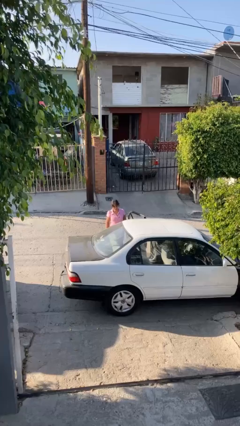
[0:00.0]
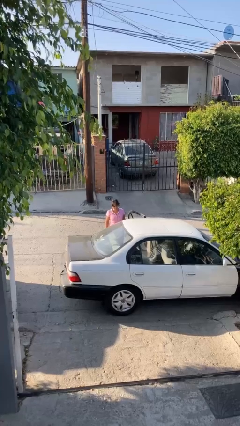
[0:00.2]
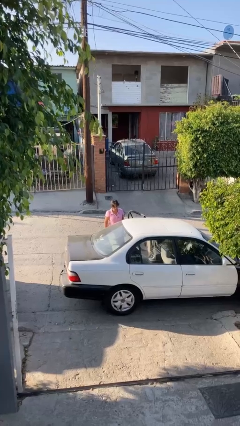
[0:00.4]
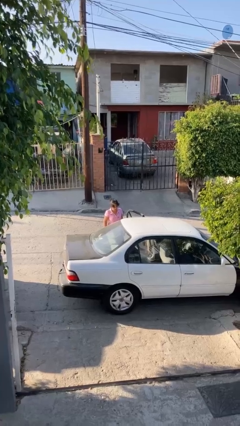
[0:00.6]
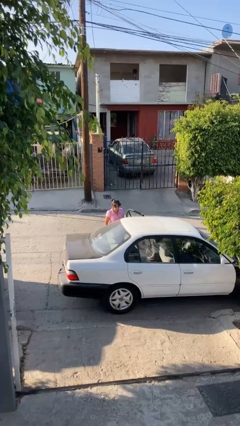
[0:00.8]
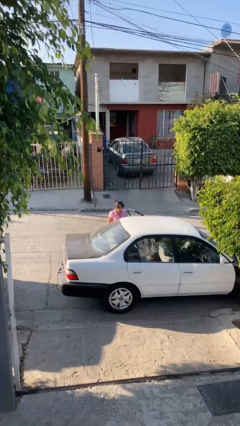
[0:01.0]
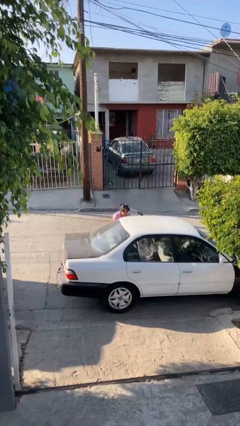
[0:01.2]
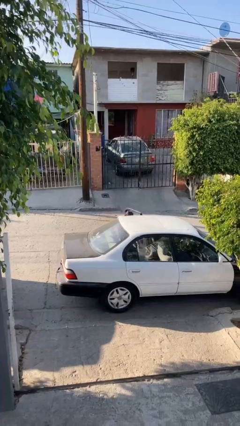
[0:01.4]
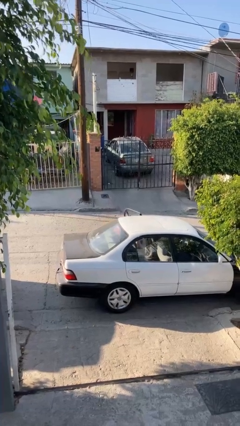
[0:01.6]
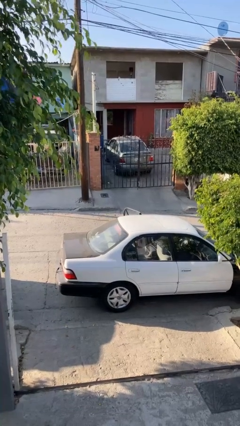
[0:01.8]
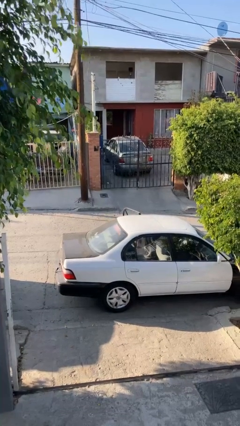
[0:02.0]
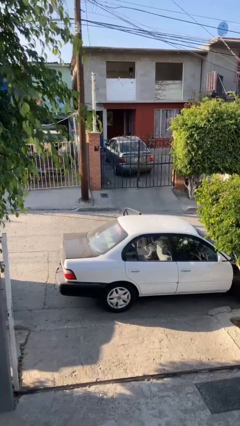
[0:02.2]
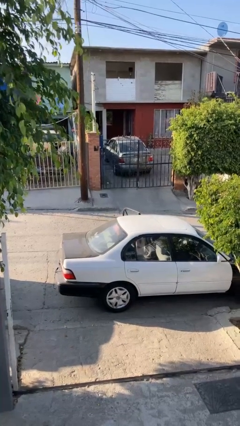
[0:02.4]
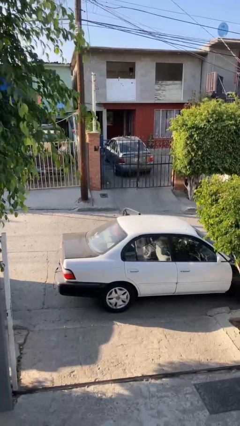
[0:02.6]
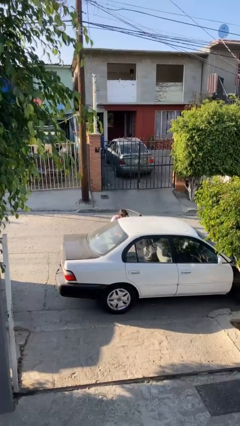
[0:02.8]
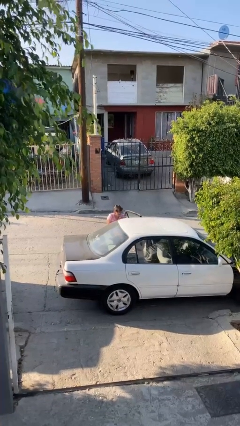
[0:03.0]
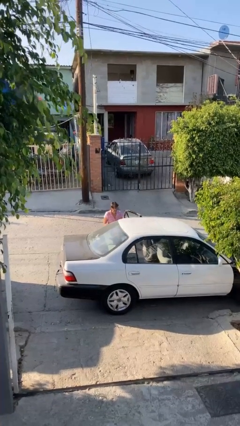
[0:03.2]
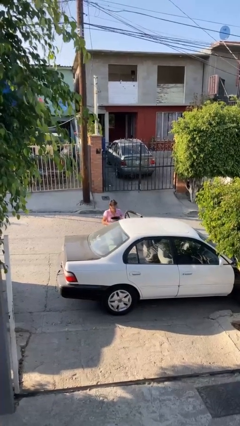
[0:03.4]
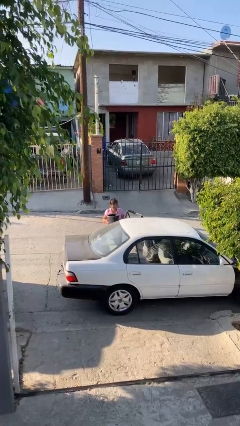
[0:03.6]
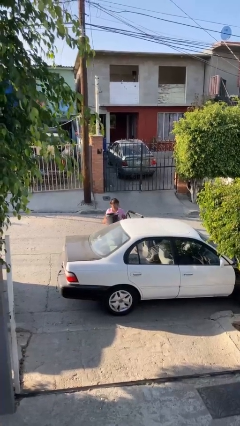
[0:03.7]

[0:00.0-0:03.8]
person unloads car

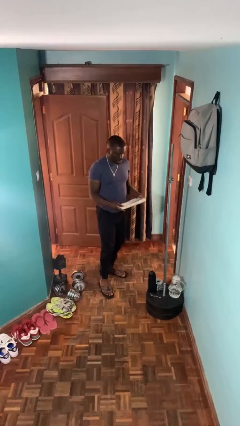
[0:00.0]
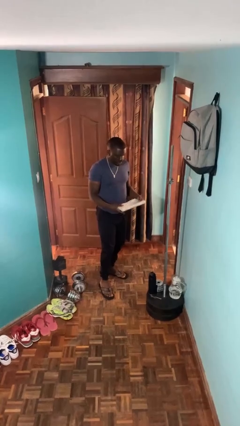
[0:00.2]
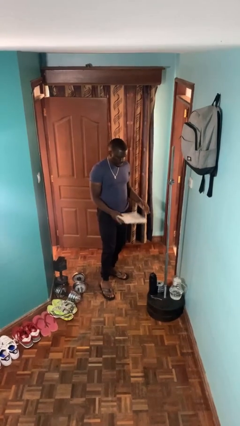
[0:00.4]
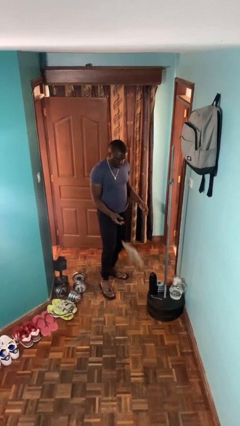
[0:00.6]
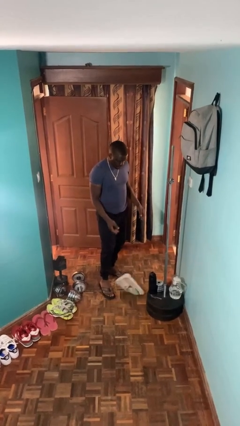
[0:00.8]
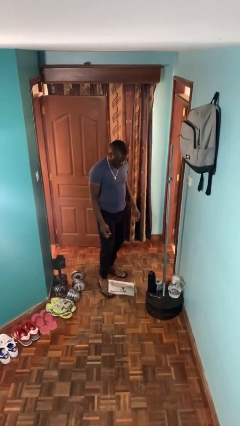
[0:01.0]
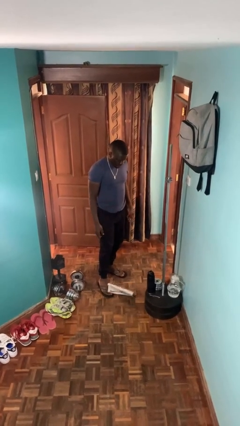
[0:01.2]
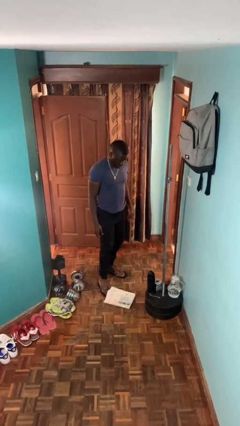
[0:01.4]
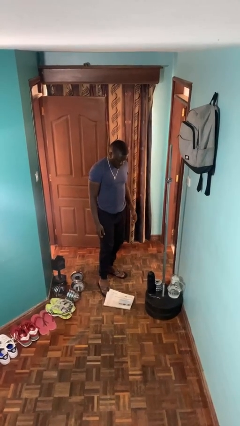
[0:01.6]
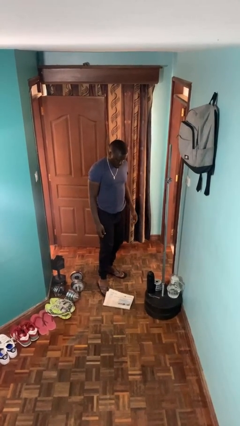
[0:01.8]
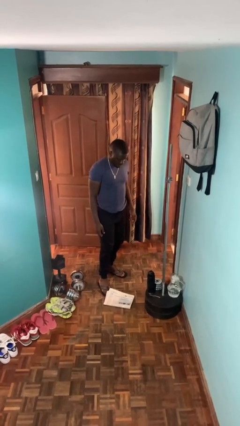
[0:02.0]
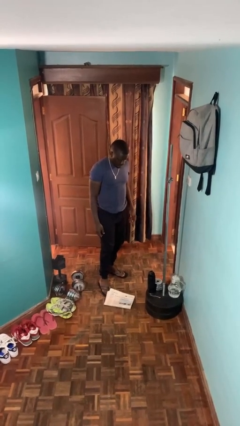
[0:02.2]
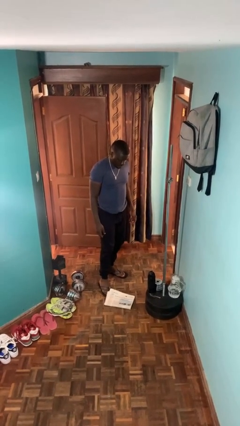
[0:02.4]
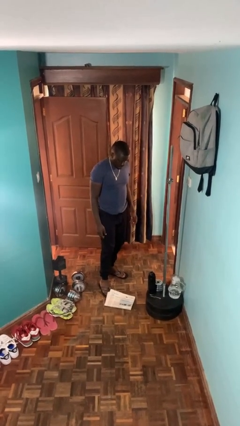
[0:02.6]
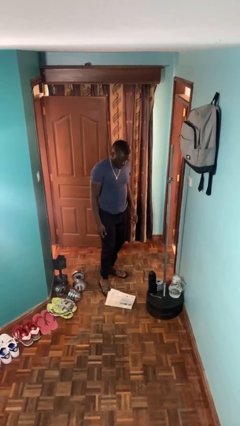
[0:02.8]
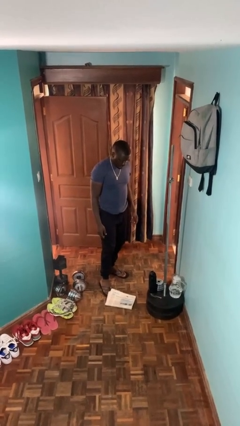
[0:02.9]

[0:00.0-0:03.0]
person drops object

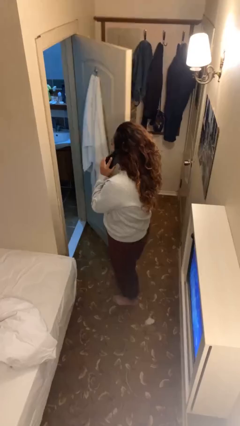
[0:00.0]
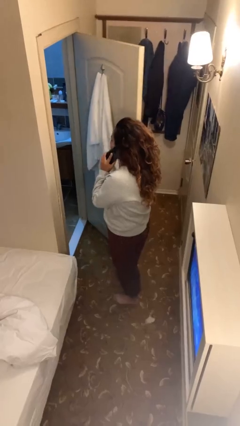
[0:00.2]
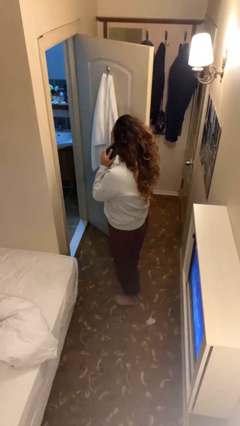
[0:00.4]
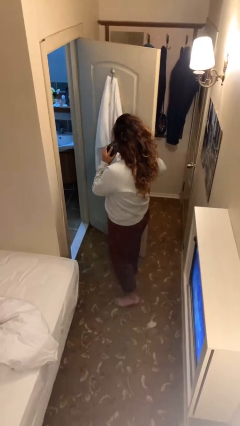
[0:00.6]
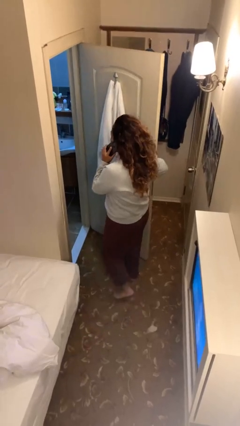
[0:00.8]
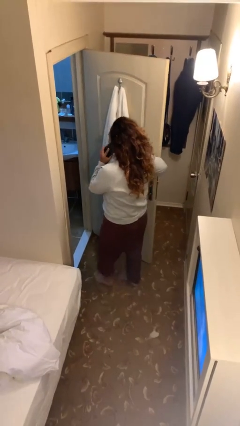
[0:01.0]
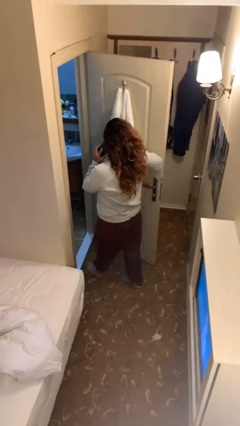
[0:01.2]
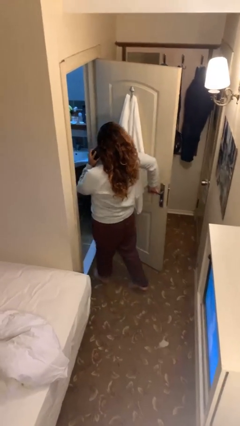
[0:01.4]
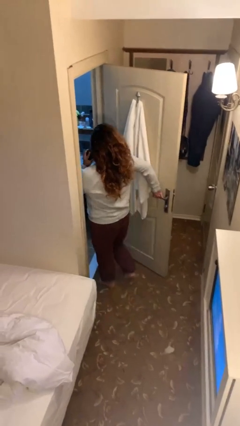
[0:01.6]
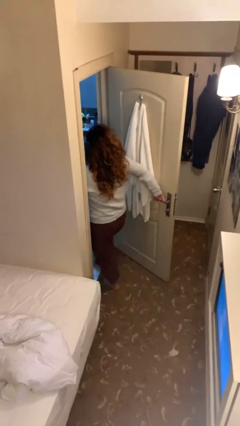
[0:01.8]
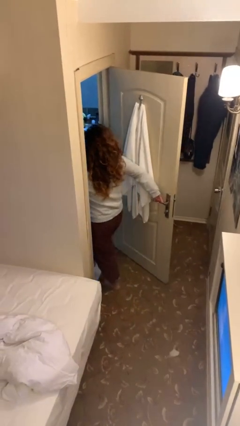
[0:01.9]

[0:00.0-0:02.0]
person exits scene through structure

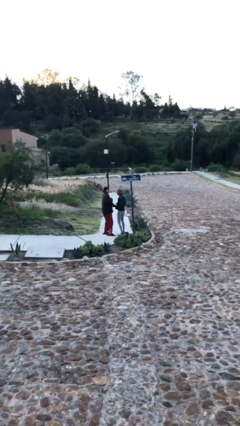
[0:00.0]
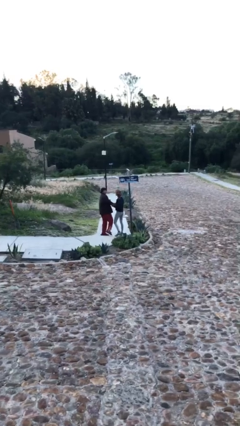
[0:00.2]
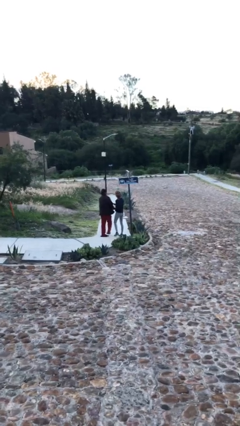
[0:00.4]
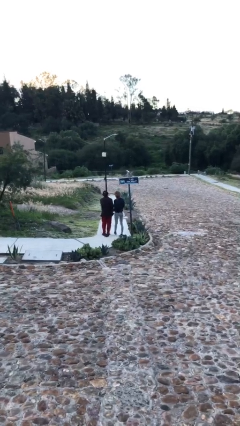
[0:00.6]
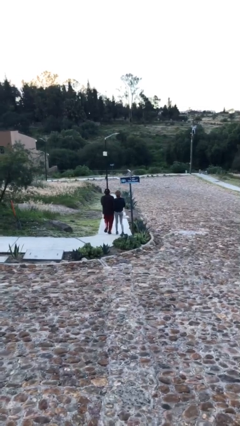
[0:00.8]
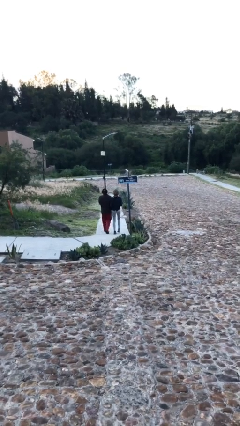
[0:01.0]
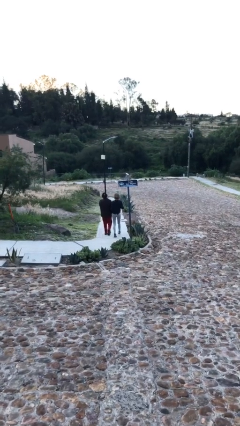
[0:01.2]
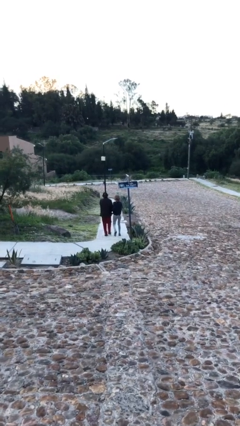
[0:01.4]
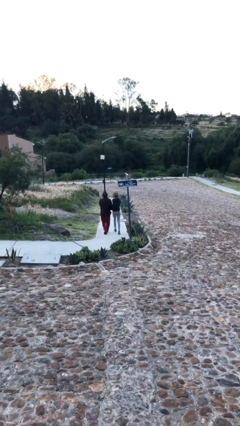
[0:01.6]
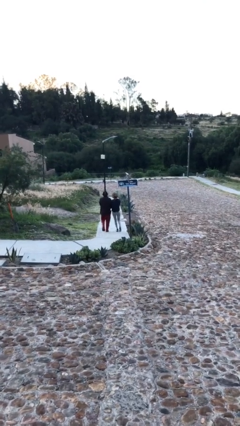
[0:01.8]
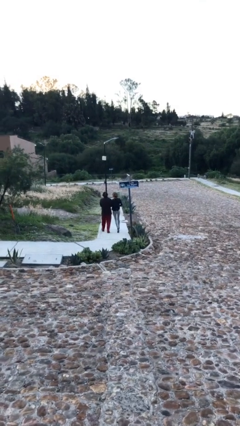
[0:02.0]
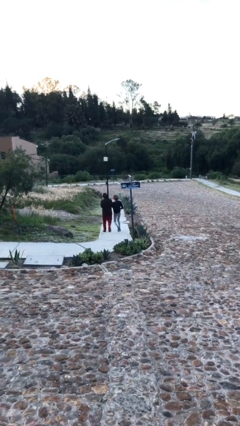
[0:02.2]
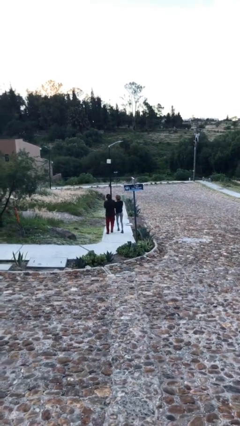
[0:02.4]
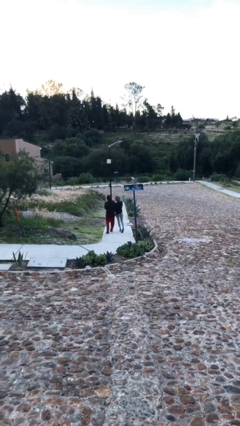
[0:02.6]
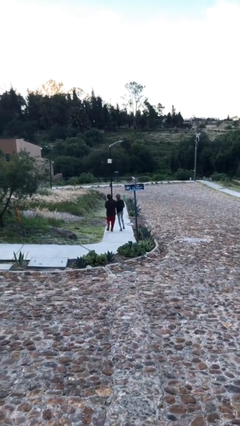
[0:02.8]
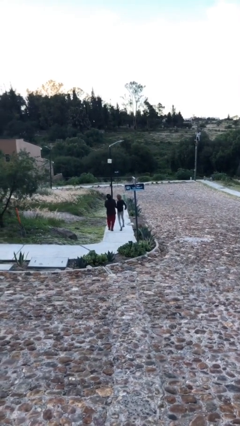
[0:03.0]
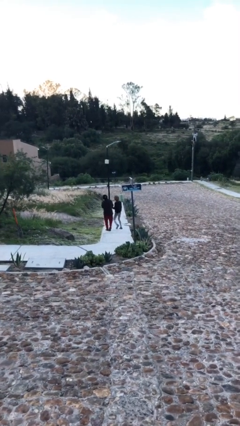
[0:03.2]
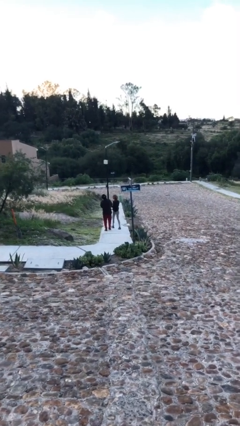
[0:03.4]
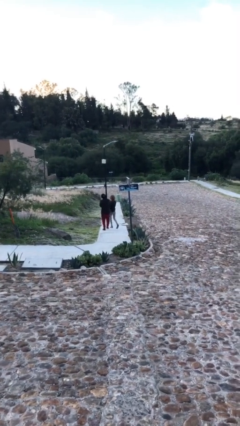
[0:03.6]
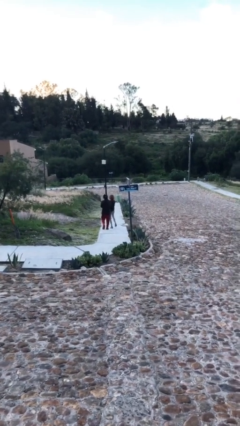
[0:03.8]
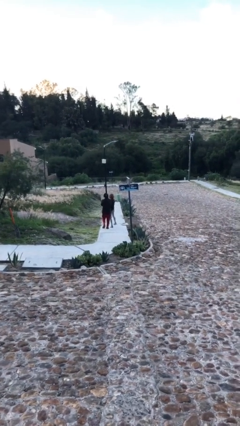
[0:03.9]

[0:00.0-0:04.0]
person talks to person

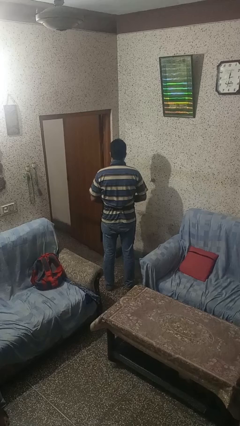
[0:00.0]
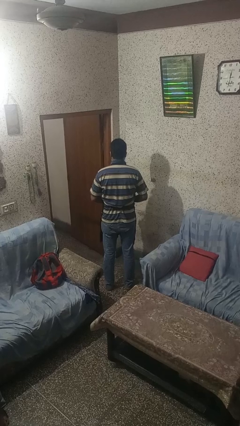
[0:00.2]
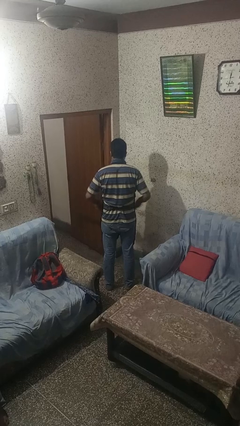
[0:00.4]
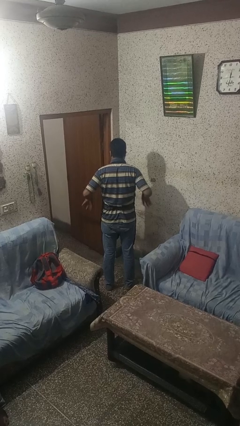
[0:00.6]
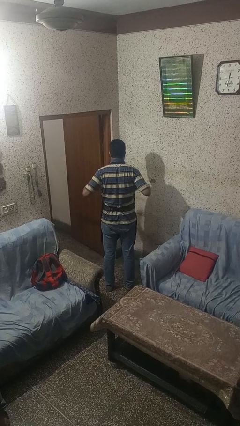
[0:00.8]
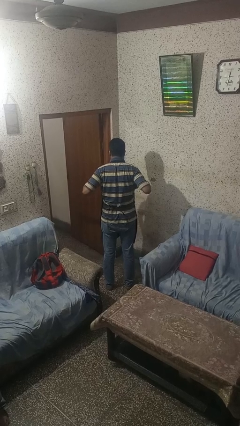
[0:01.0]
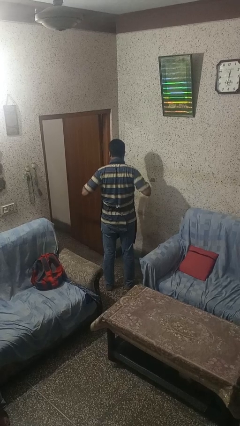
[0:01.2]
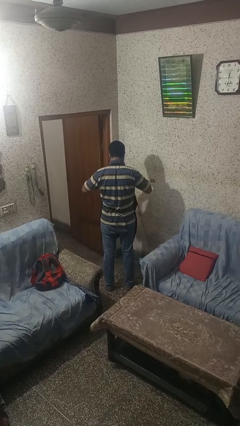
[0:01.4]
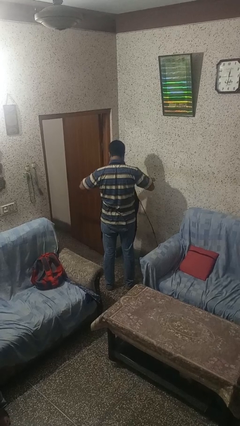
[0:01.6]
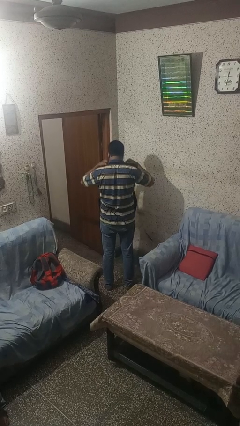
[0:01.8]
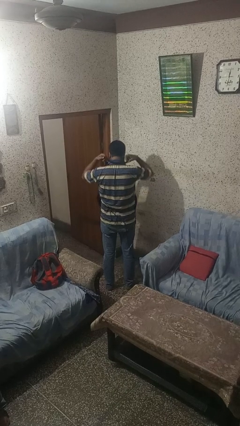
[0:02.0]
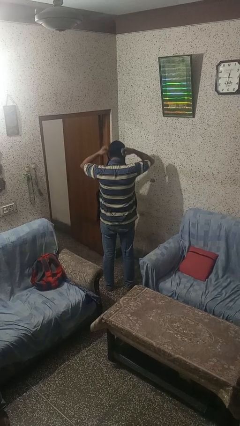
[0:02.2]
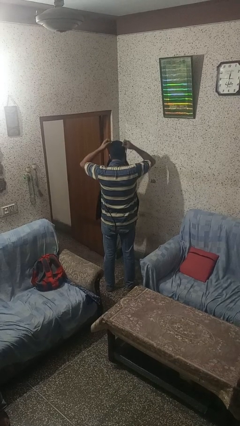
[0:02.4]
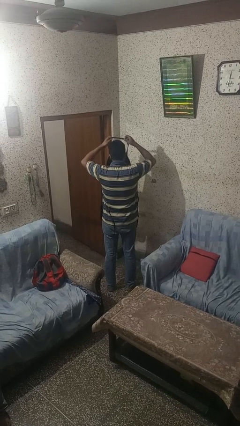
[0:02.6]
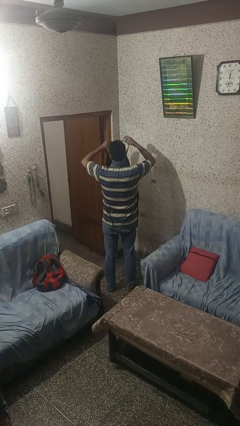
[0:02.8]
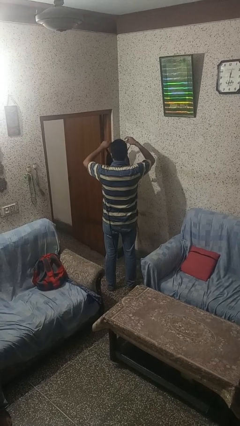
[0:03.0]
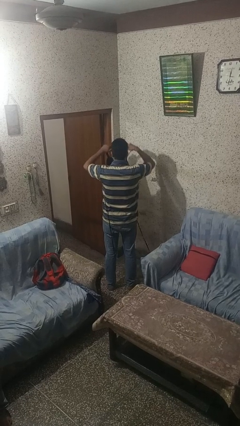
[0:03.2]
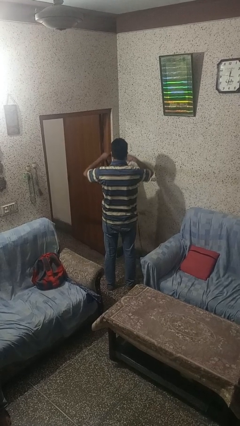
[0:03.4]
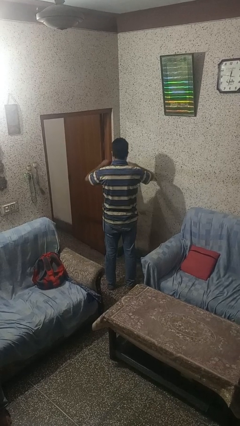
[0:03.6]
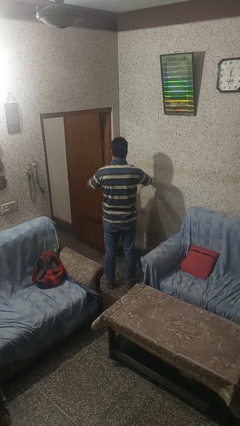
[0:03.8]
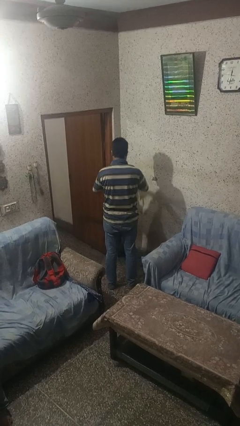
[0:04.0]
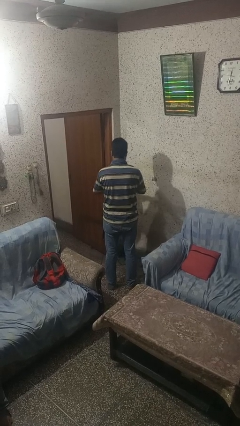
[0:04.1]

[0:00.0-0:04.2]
person takes off apron

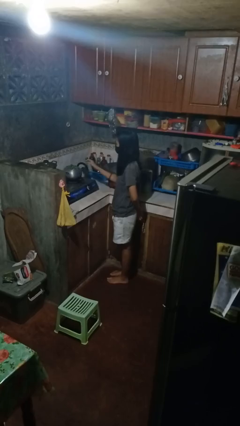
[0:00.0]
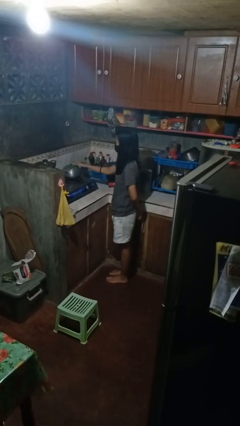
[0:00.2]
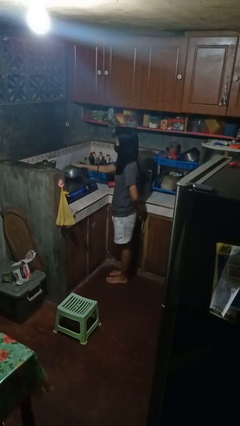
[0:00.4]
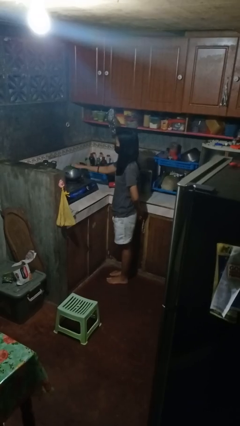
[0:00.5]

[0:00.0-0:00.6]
person burns hand
